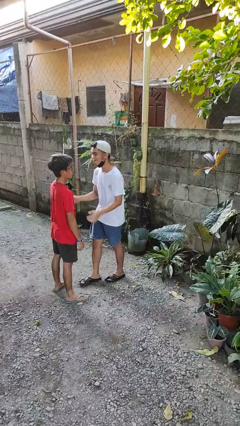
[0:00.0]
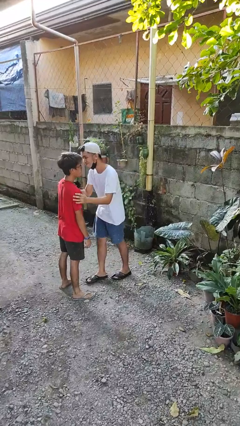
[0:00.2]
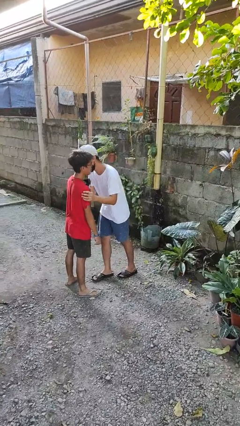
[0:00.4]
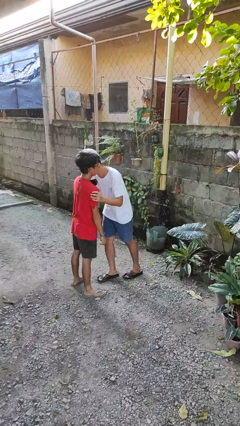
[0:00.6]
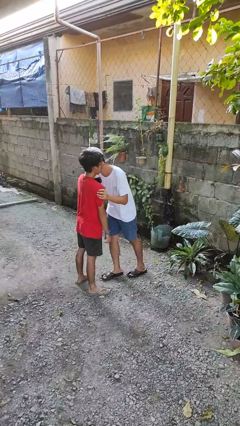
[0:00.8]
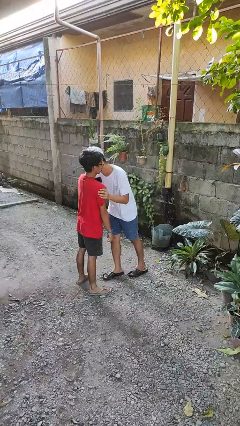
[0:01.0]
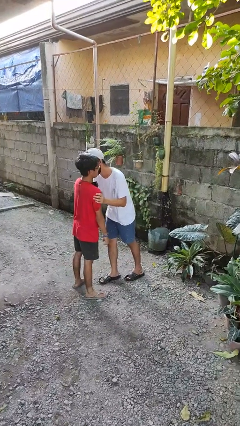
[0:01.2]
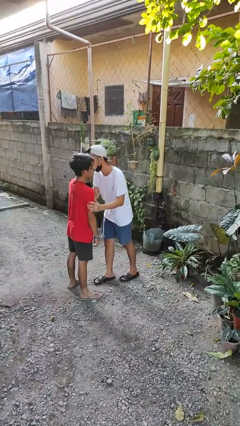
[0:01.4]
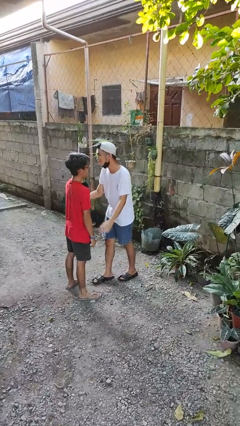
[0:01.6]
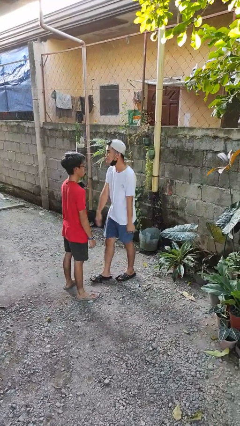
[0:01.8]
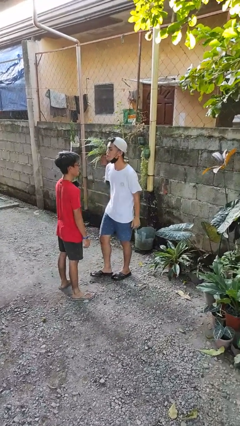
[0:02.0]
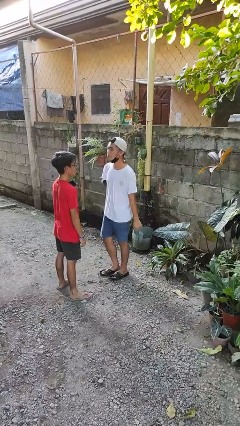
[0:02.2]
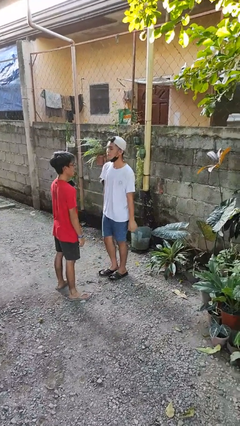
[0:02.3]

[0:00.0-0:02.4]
person kisses cheek of person

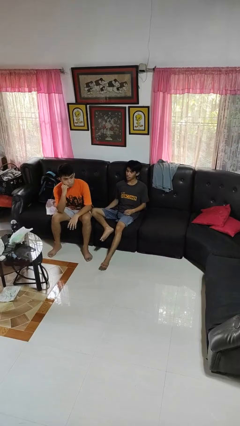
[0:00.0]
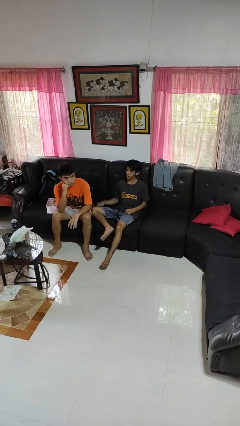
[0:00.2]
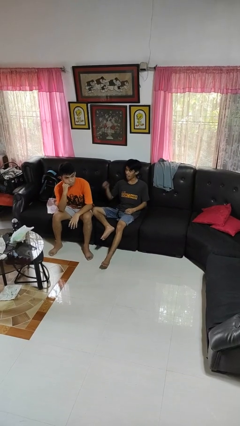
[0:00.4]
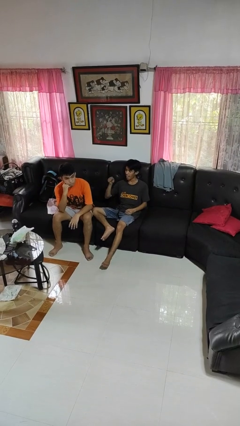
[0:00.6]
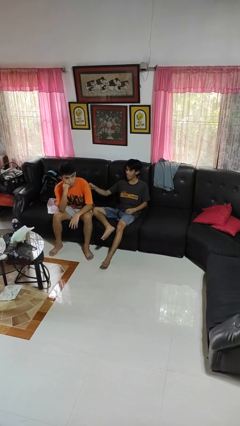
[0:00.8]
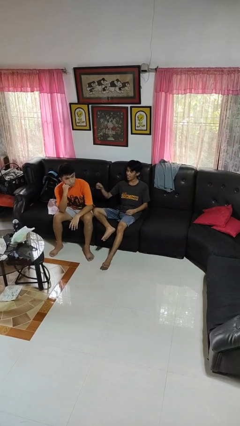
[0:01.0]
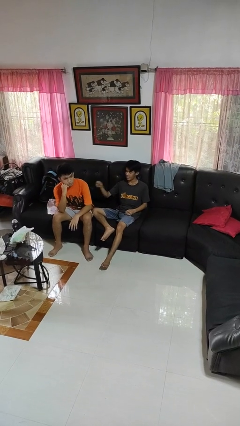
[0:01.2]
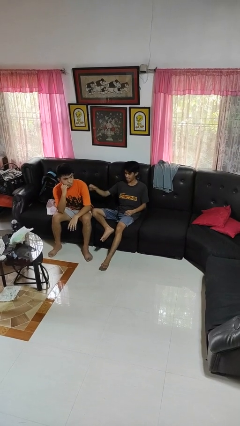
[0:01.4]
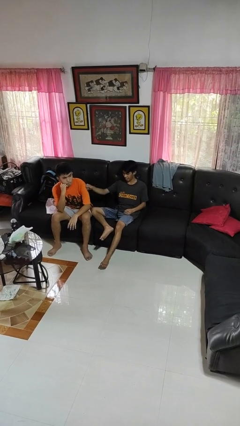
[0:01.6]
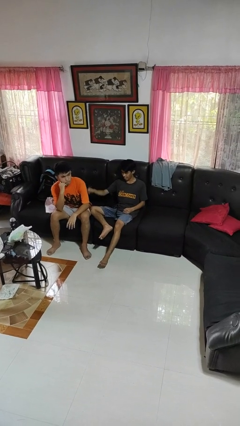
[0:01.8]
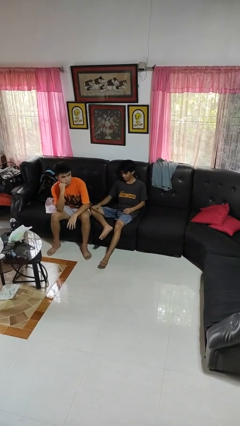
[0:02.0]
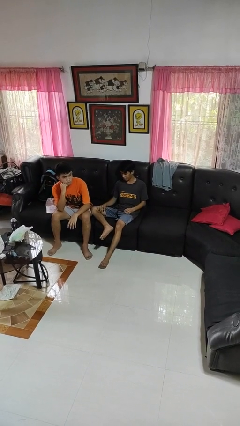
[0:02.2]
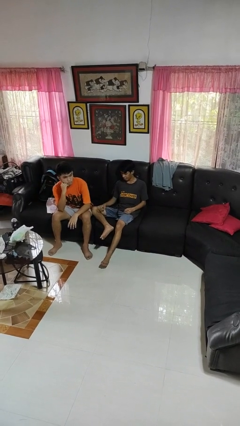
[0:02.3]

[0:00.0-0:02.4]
person pounds shoulders of person

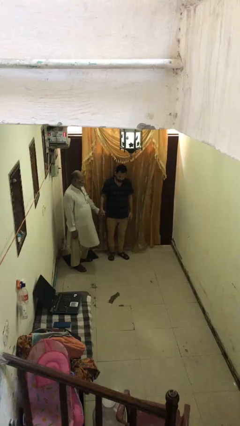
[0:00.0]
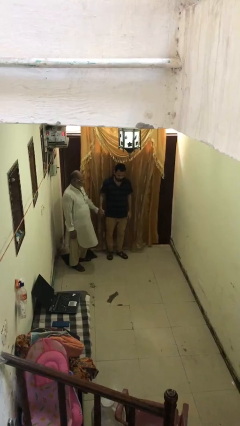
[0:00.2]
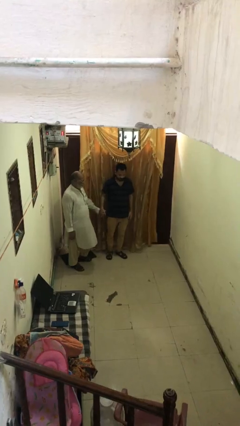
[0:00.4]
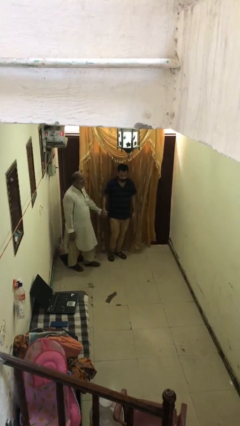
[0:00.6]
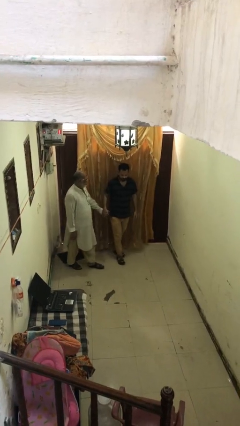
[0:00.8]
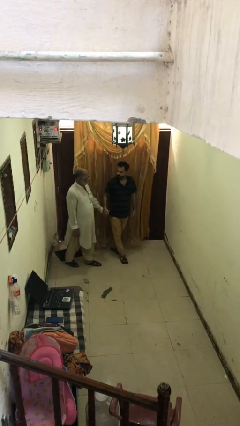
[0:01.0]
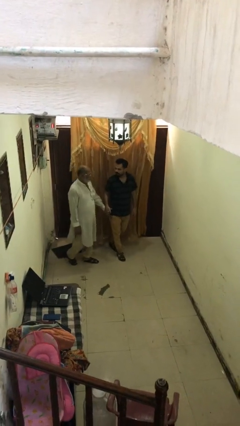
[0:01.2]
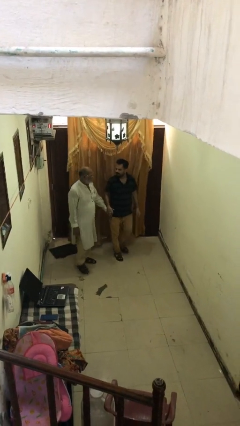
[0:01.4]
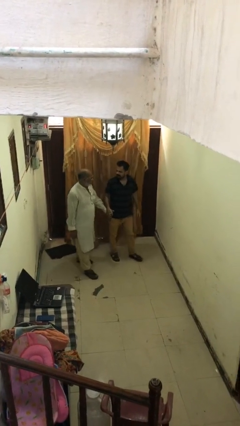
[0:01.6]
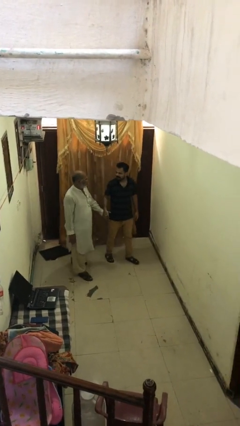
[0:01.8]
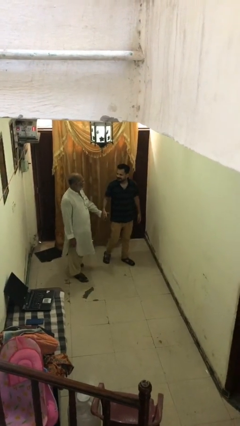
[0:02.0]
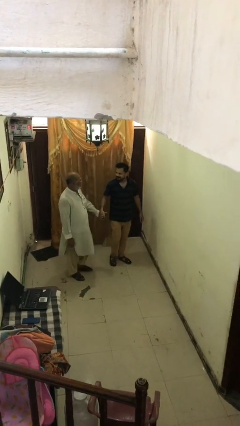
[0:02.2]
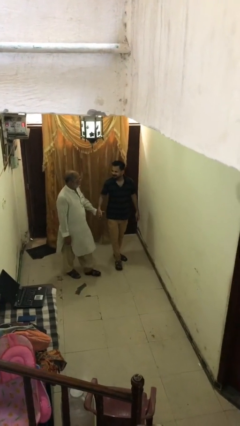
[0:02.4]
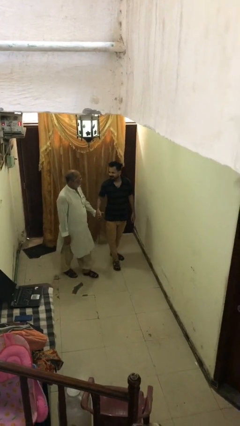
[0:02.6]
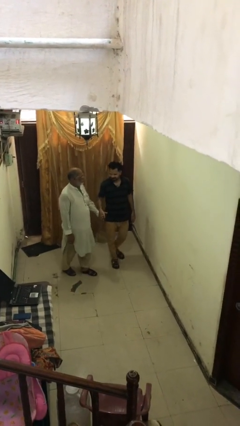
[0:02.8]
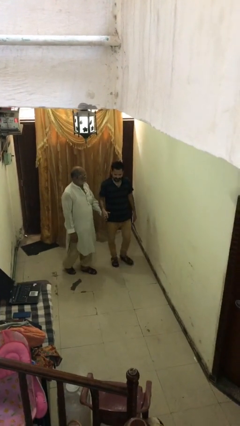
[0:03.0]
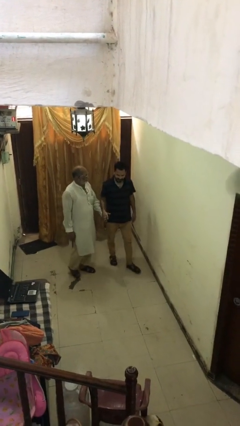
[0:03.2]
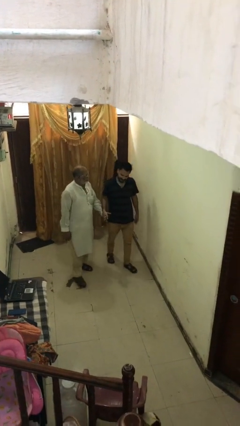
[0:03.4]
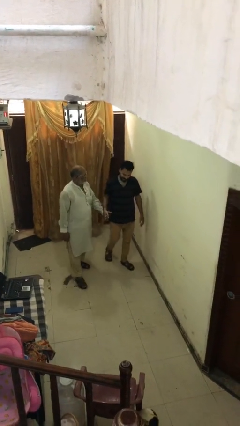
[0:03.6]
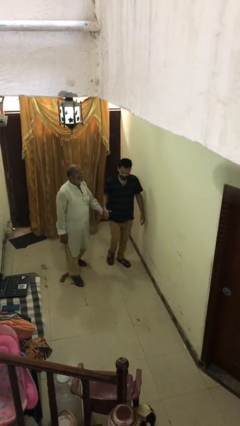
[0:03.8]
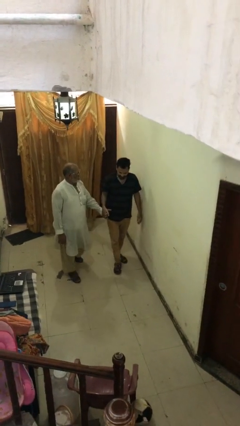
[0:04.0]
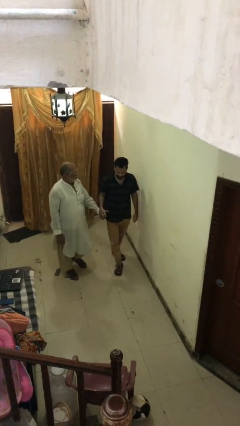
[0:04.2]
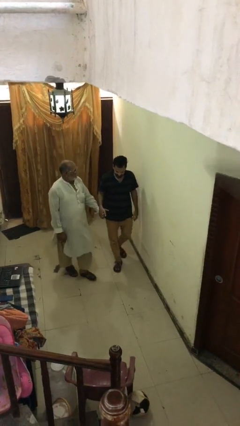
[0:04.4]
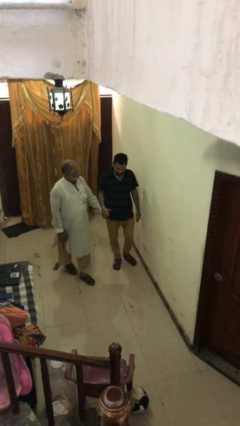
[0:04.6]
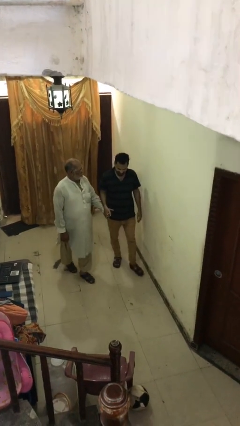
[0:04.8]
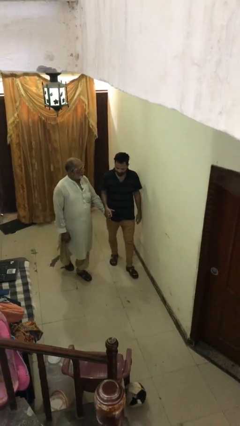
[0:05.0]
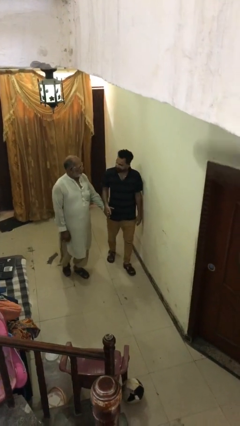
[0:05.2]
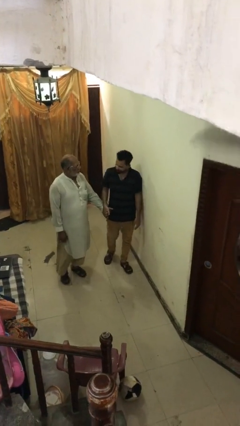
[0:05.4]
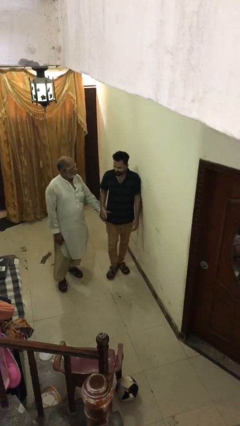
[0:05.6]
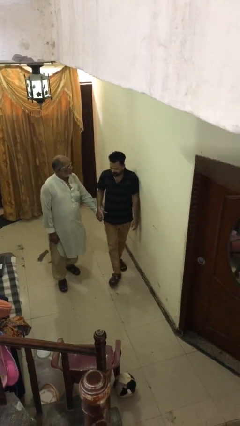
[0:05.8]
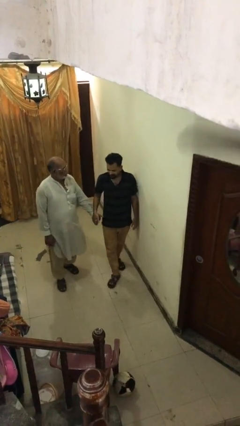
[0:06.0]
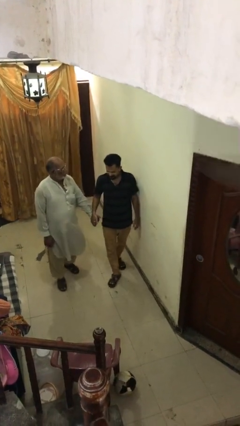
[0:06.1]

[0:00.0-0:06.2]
person holds hand

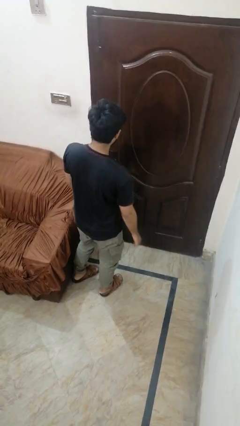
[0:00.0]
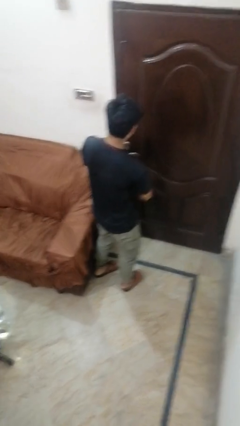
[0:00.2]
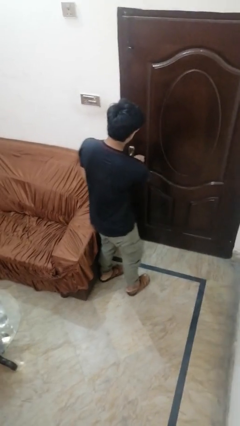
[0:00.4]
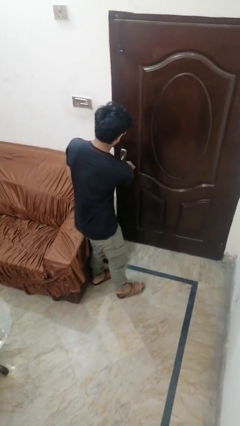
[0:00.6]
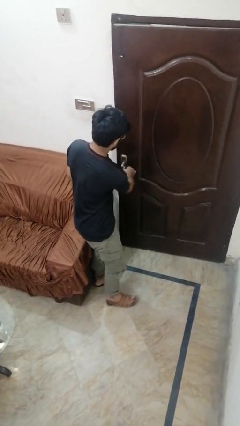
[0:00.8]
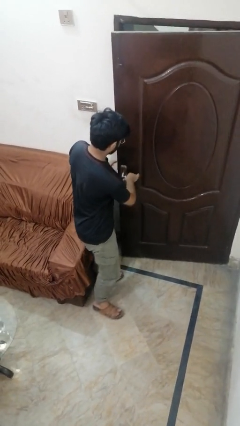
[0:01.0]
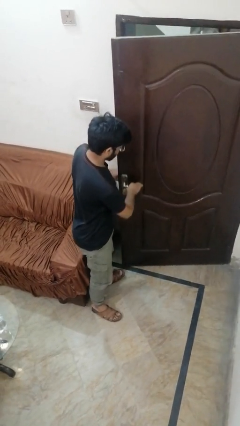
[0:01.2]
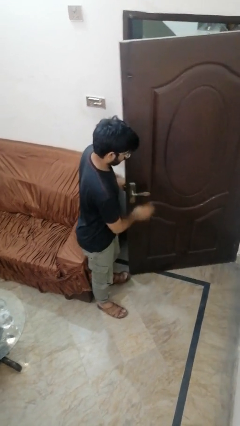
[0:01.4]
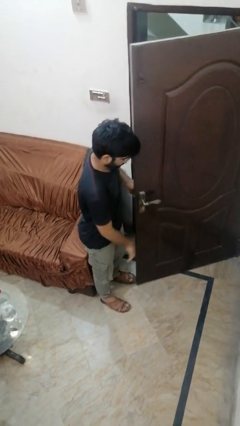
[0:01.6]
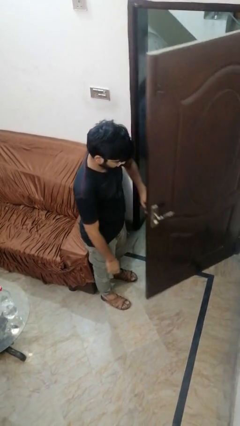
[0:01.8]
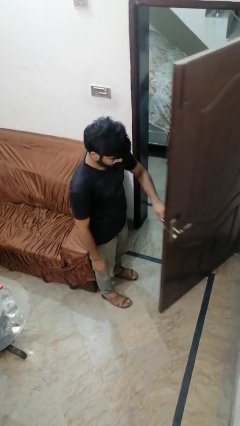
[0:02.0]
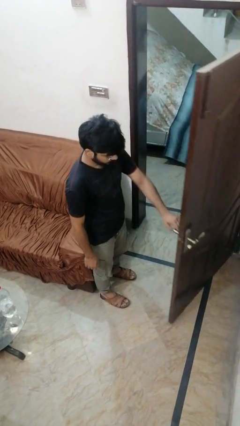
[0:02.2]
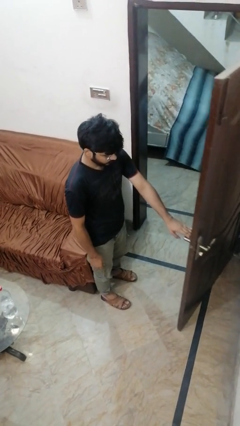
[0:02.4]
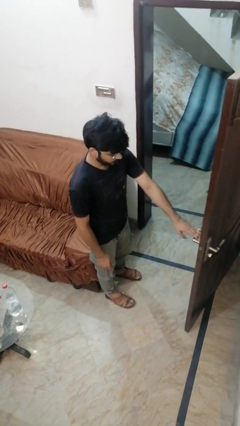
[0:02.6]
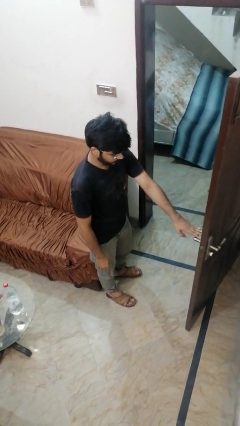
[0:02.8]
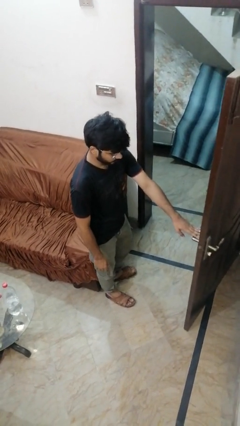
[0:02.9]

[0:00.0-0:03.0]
person opens facility door

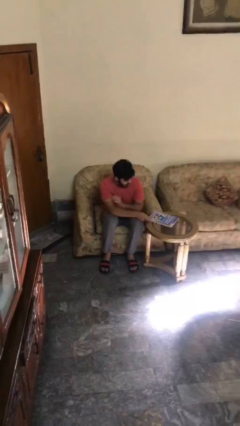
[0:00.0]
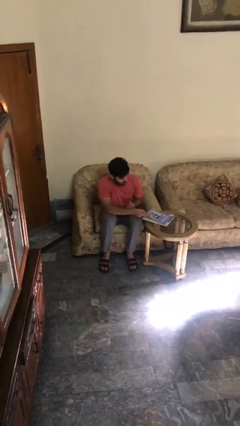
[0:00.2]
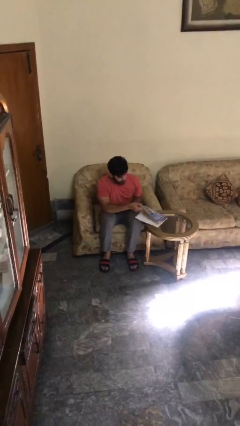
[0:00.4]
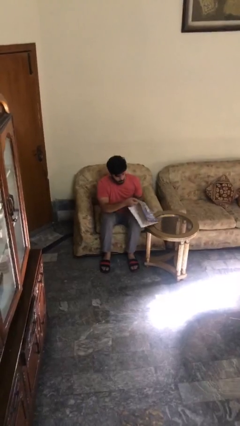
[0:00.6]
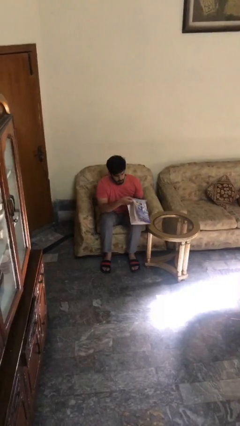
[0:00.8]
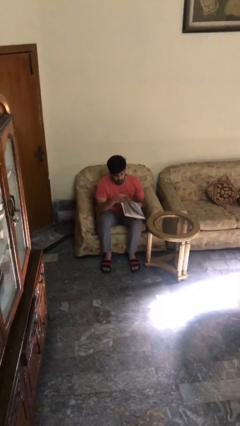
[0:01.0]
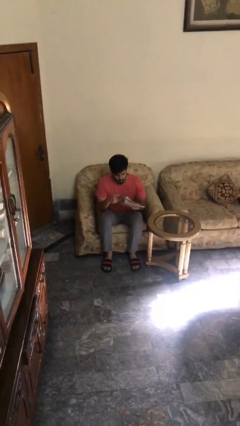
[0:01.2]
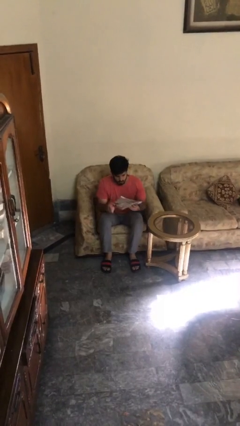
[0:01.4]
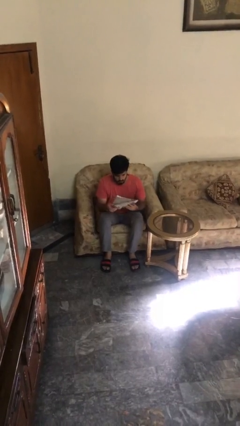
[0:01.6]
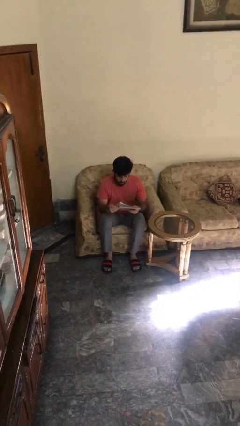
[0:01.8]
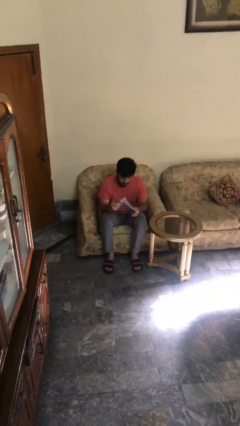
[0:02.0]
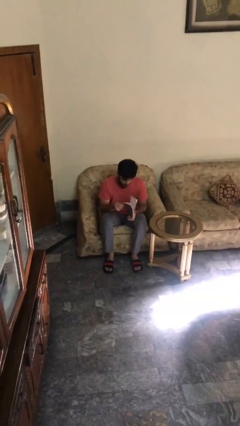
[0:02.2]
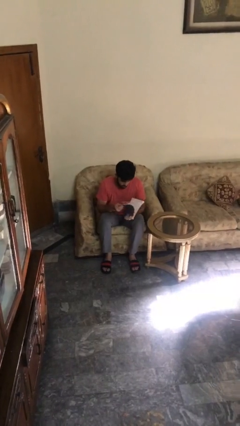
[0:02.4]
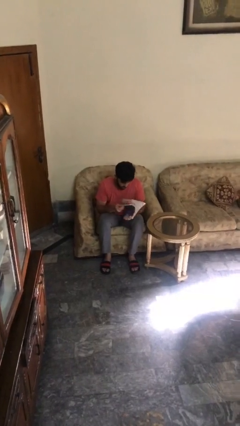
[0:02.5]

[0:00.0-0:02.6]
person picks up object from table

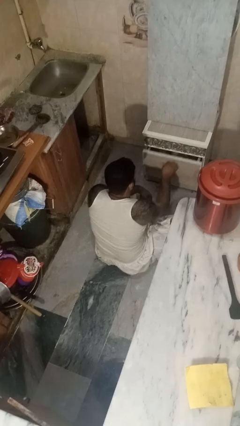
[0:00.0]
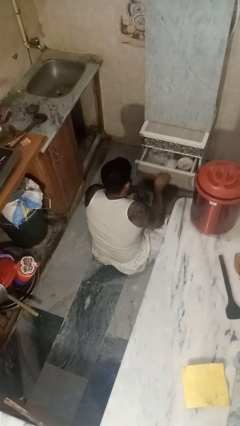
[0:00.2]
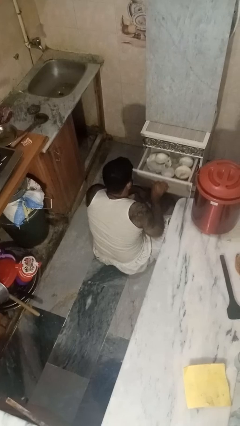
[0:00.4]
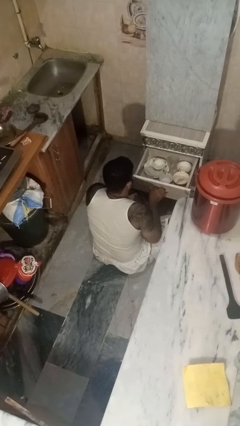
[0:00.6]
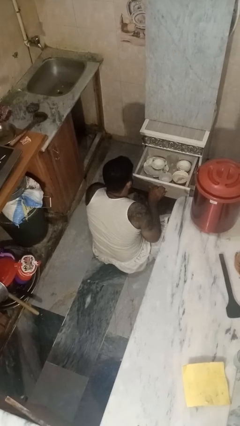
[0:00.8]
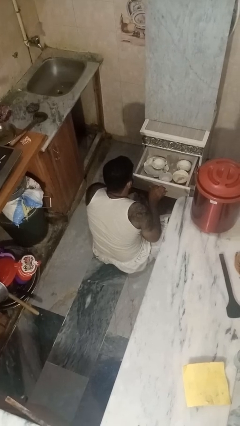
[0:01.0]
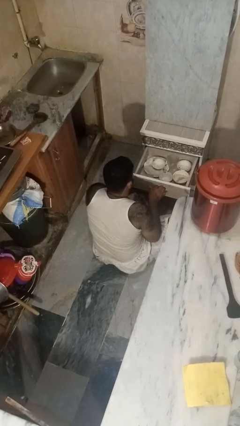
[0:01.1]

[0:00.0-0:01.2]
person opens kitchen drawer
